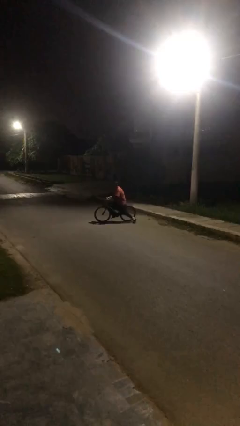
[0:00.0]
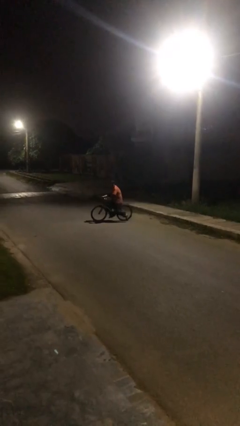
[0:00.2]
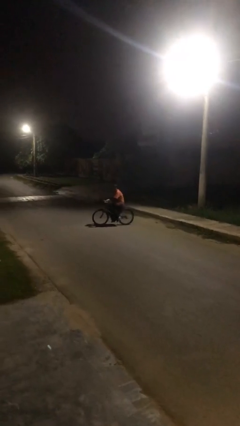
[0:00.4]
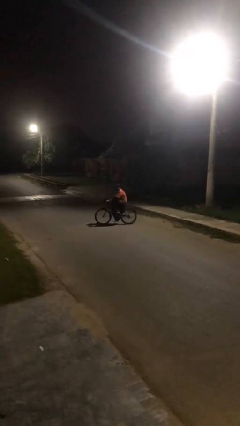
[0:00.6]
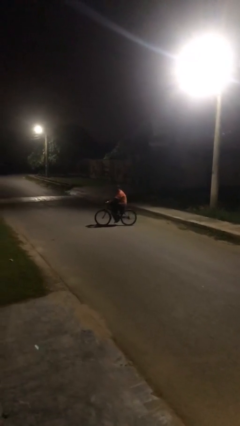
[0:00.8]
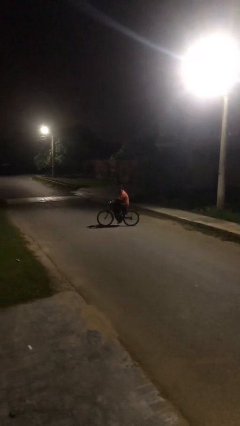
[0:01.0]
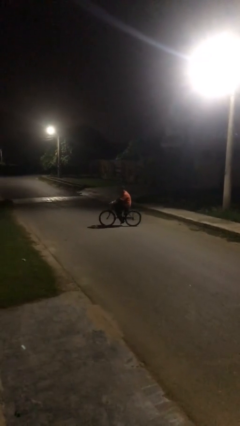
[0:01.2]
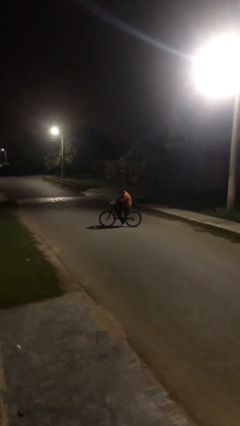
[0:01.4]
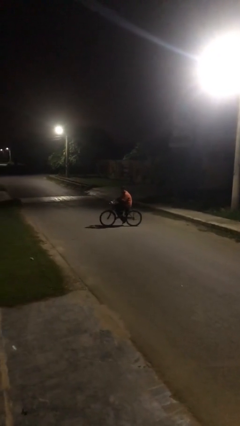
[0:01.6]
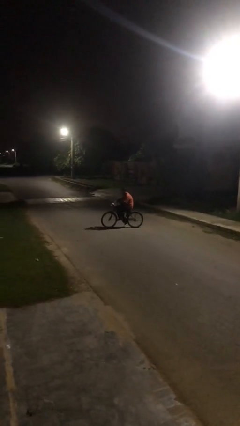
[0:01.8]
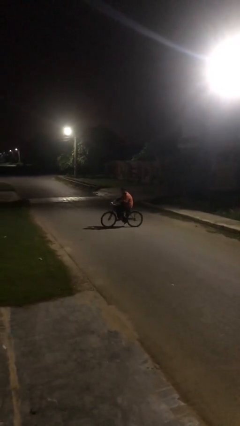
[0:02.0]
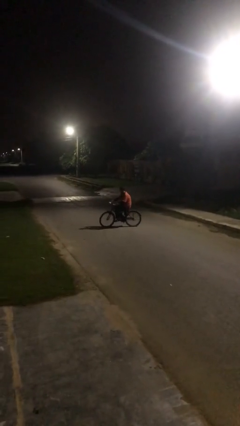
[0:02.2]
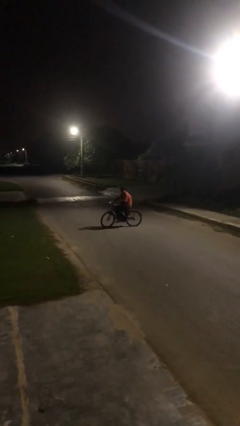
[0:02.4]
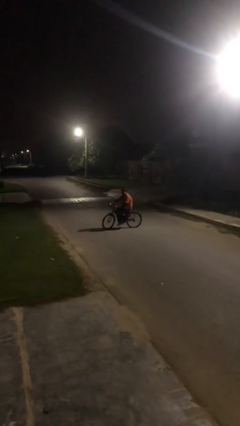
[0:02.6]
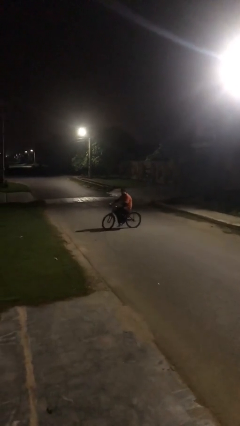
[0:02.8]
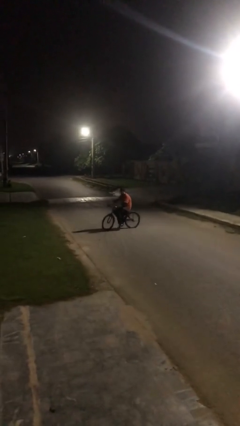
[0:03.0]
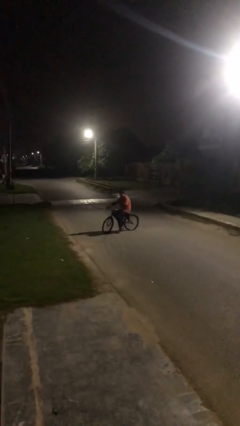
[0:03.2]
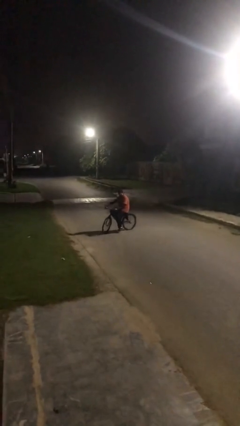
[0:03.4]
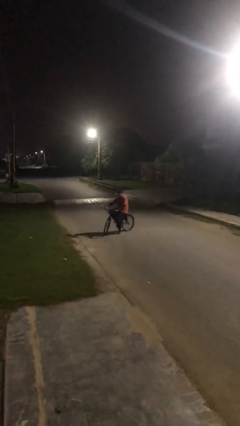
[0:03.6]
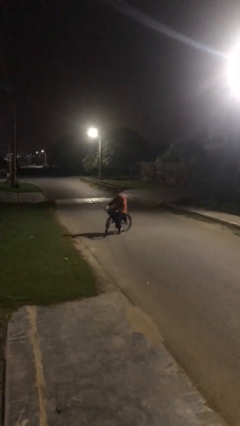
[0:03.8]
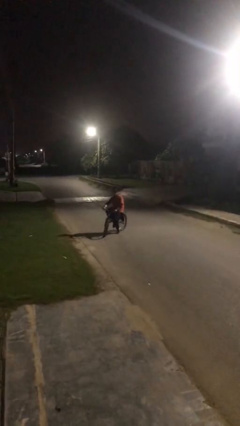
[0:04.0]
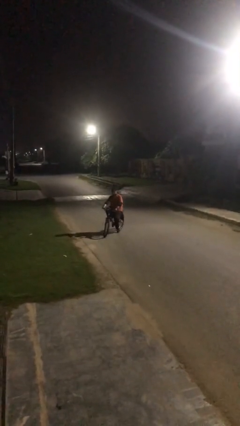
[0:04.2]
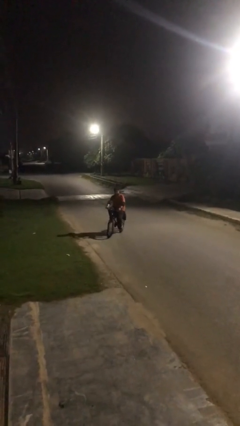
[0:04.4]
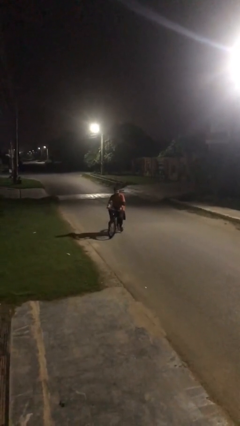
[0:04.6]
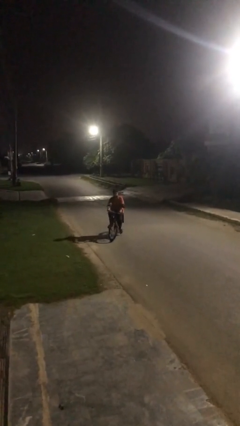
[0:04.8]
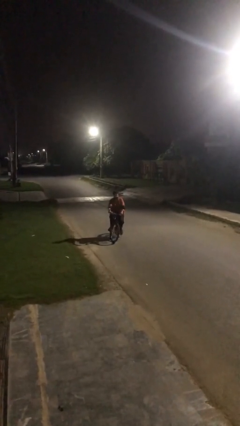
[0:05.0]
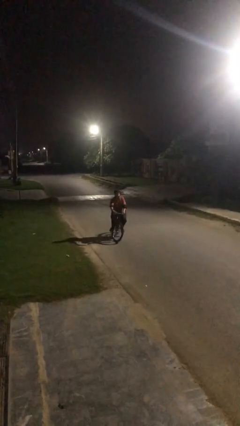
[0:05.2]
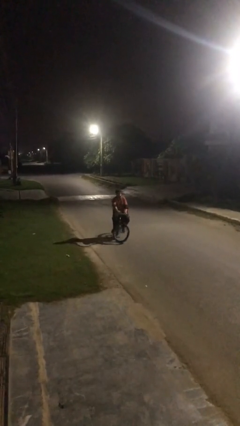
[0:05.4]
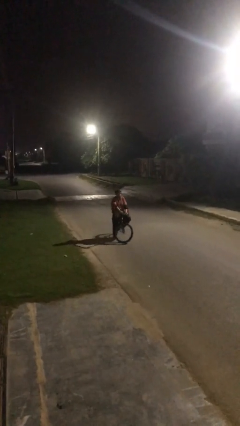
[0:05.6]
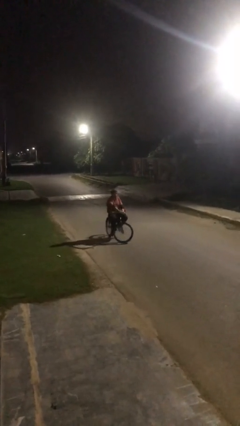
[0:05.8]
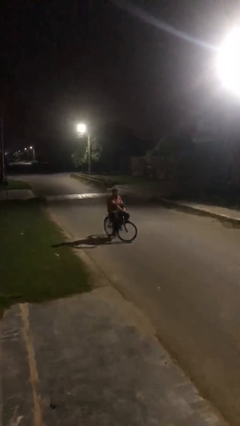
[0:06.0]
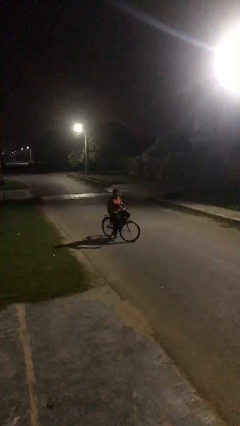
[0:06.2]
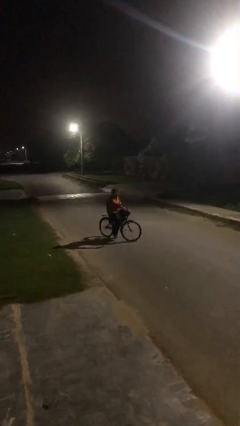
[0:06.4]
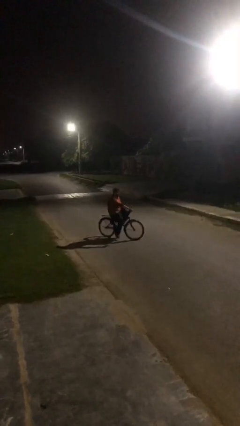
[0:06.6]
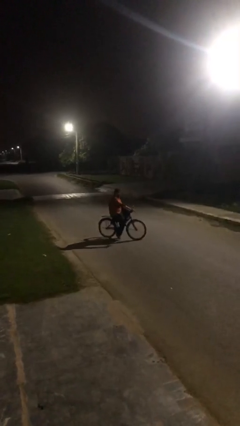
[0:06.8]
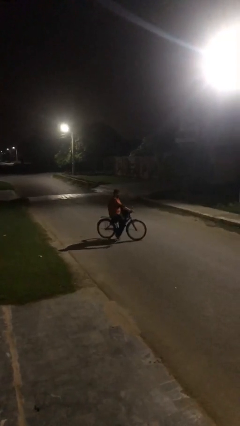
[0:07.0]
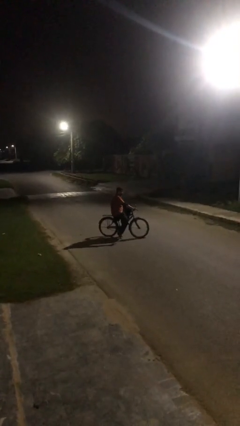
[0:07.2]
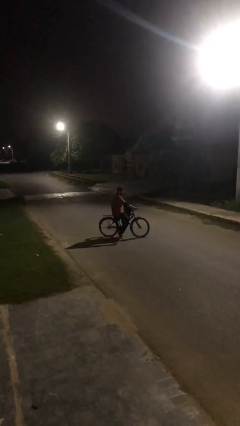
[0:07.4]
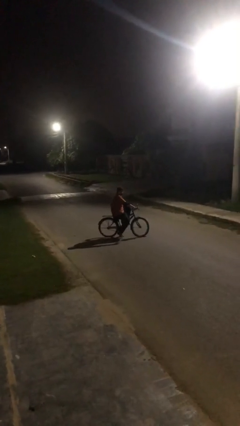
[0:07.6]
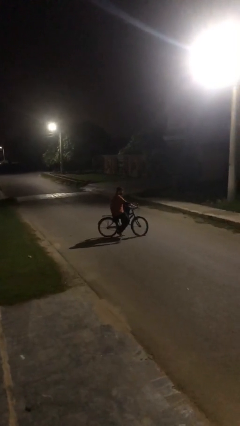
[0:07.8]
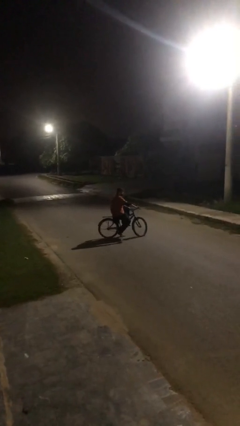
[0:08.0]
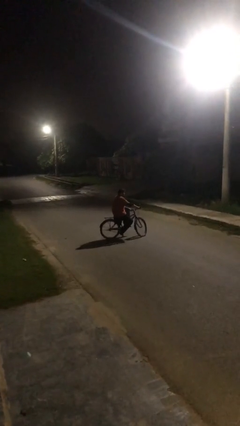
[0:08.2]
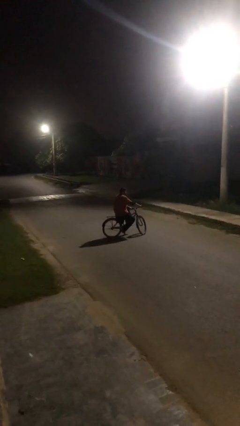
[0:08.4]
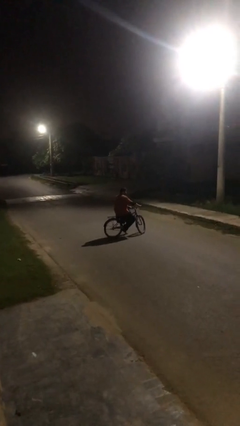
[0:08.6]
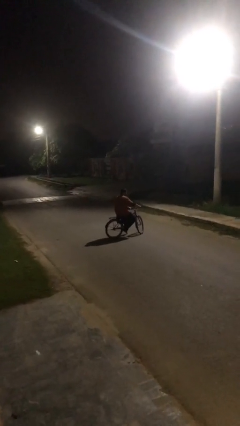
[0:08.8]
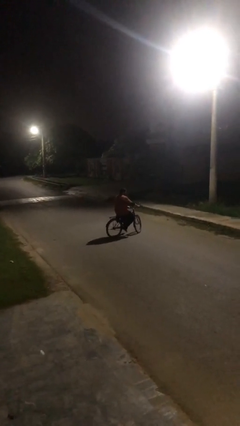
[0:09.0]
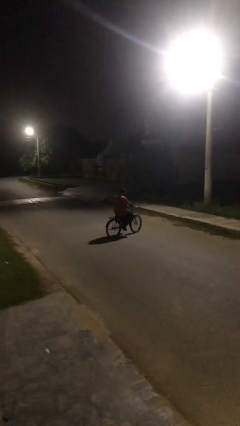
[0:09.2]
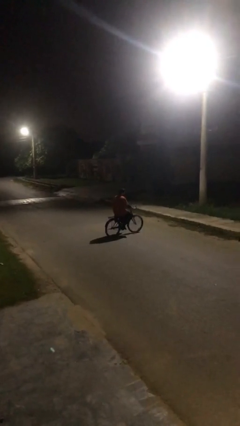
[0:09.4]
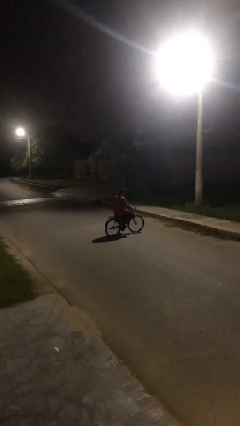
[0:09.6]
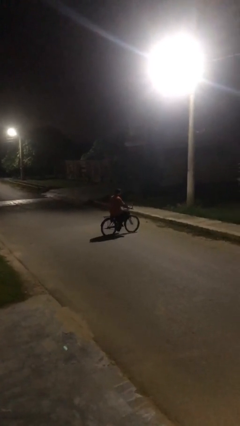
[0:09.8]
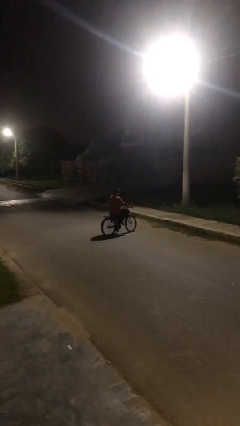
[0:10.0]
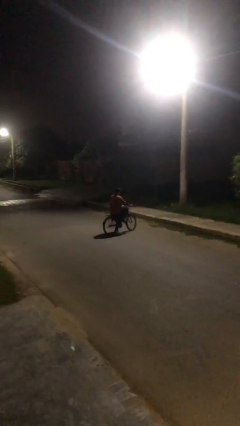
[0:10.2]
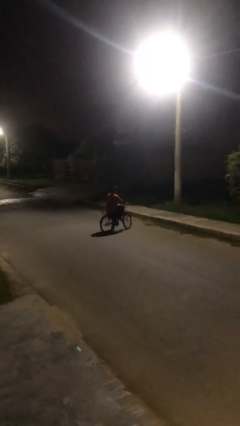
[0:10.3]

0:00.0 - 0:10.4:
person rides bicycle

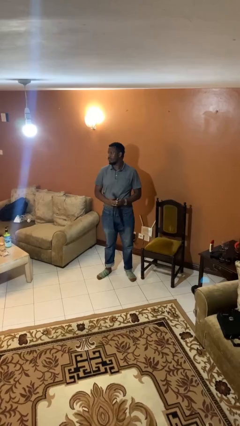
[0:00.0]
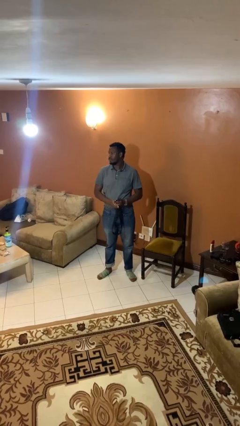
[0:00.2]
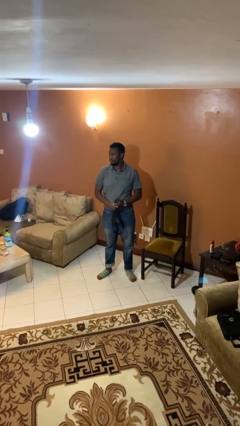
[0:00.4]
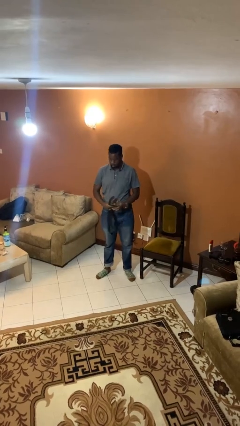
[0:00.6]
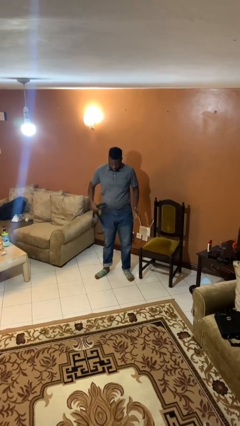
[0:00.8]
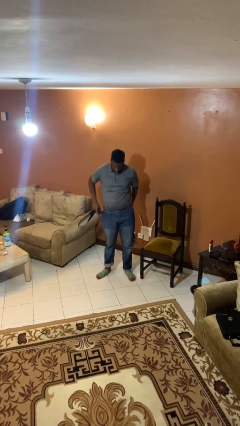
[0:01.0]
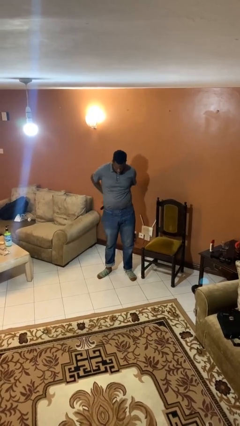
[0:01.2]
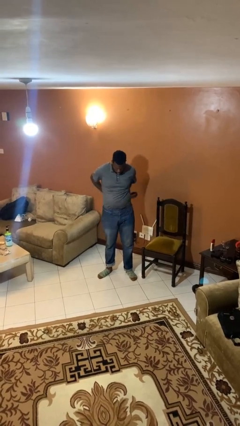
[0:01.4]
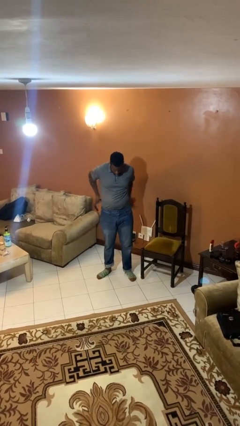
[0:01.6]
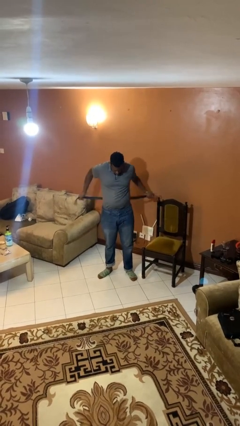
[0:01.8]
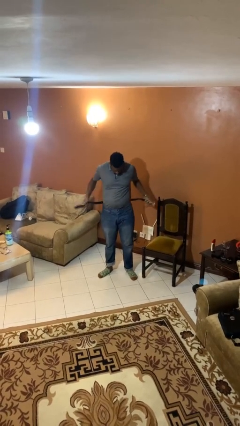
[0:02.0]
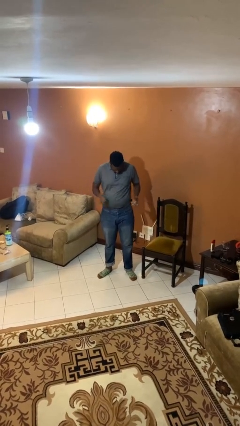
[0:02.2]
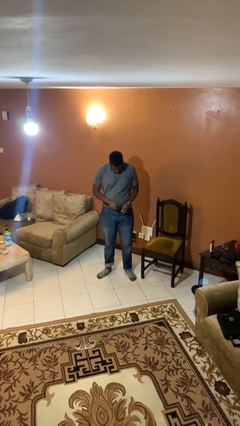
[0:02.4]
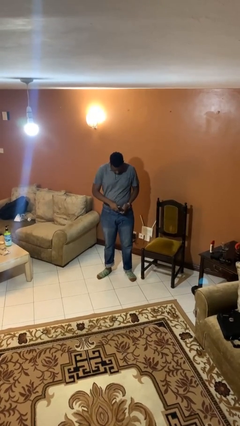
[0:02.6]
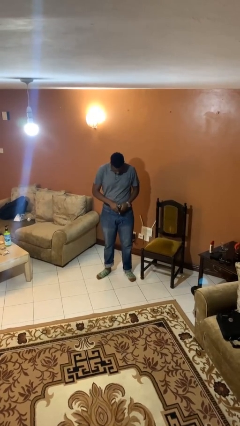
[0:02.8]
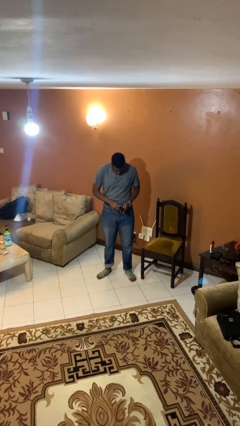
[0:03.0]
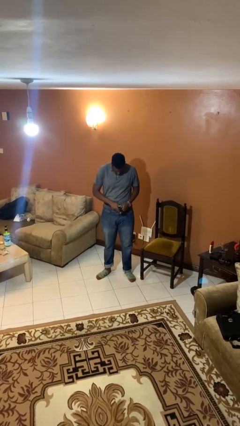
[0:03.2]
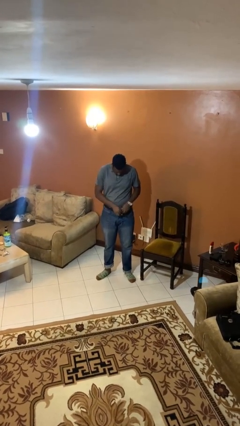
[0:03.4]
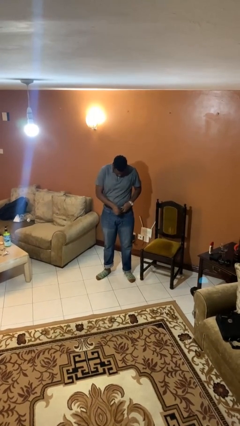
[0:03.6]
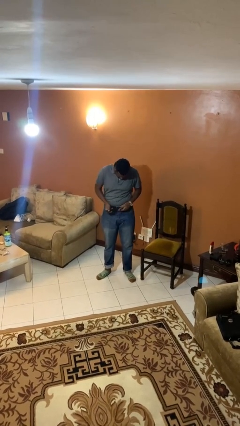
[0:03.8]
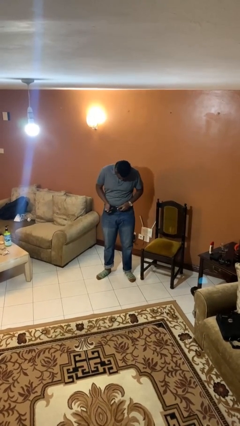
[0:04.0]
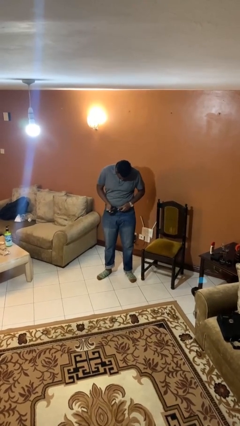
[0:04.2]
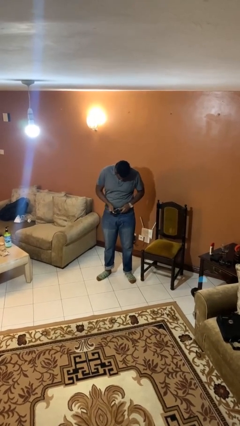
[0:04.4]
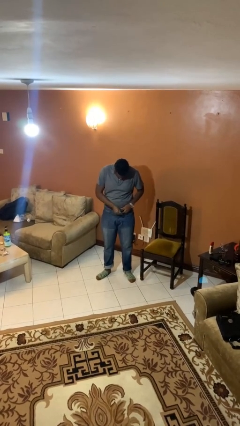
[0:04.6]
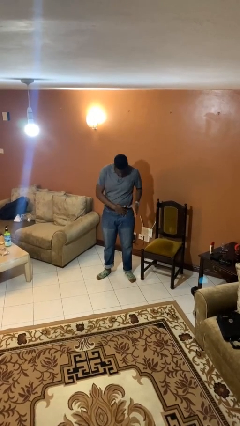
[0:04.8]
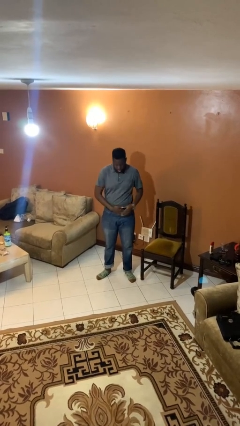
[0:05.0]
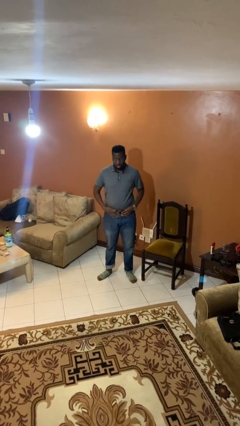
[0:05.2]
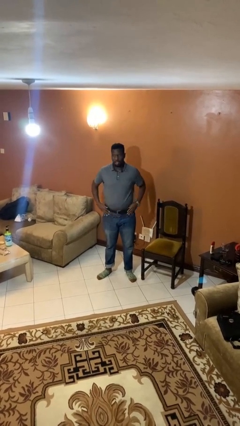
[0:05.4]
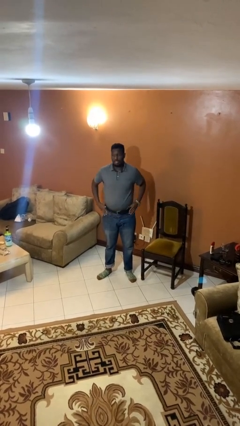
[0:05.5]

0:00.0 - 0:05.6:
person puts on belt

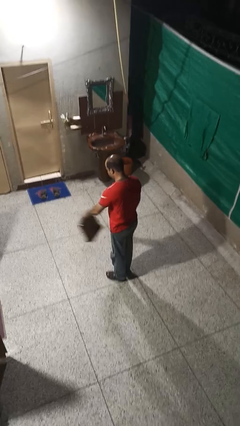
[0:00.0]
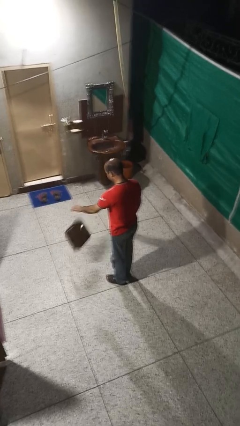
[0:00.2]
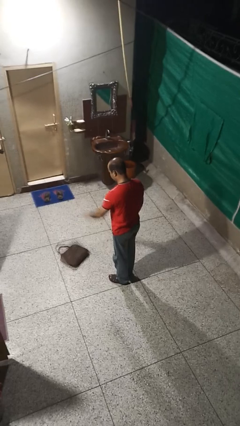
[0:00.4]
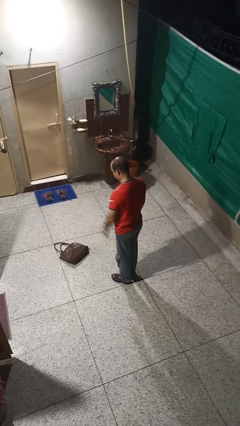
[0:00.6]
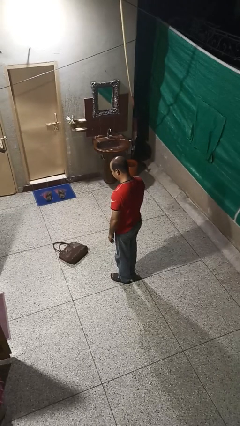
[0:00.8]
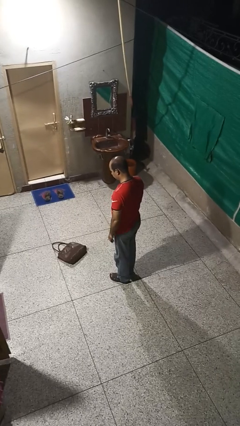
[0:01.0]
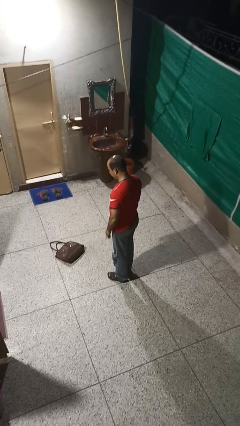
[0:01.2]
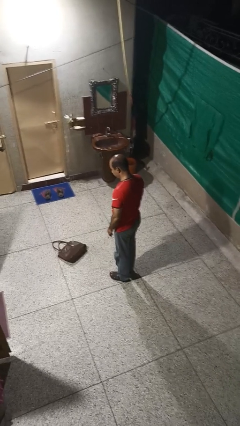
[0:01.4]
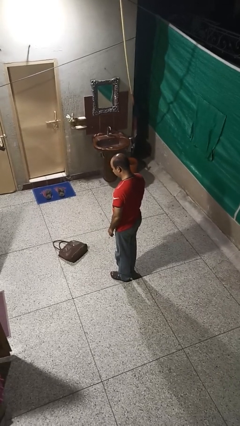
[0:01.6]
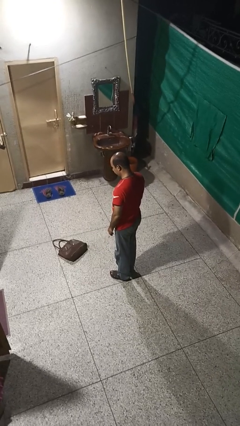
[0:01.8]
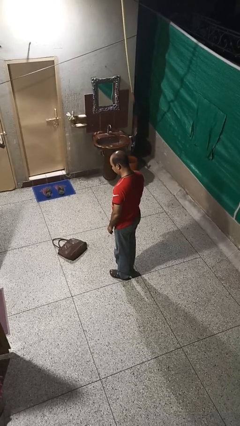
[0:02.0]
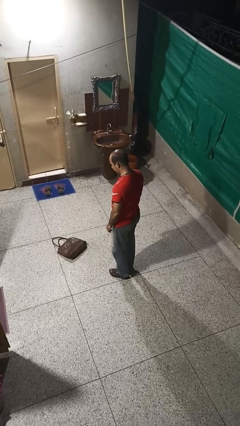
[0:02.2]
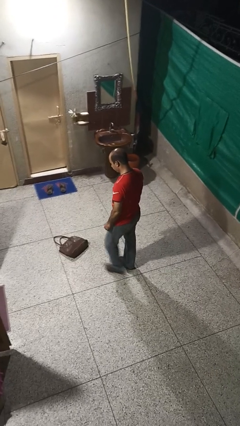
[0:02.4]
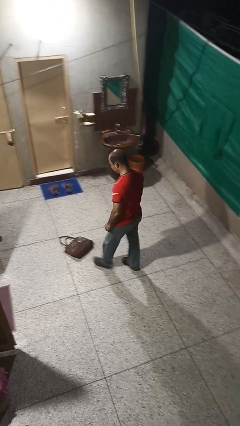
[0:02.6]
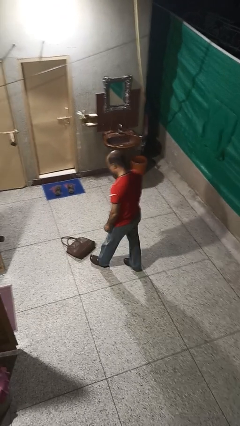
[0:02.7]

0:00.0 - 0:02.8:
person throws object to ground
